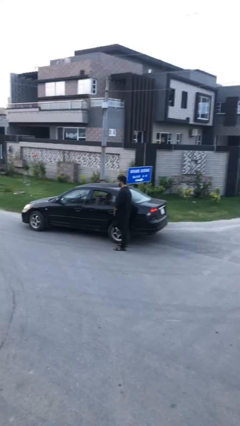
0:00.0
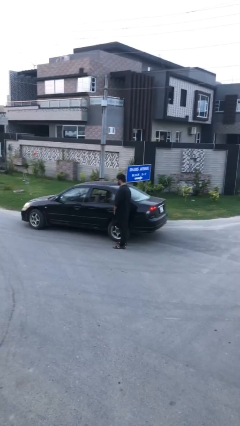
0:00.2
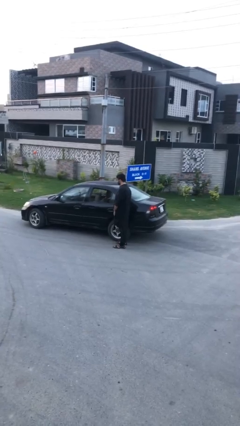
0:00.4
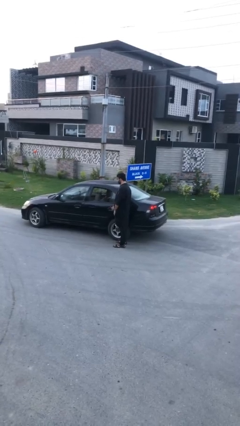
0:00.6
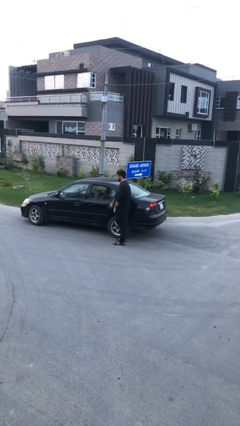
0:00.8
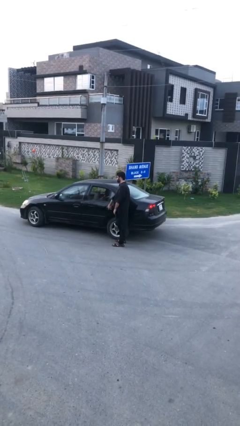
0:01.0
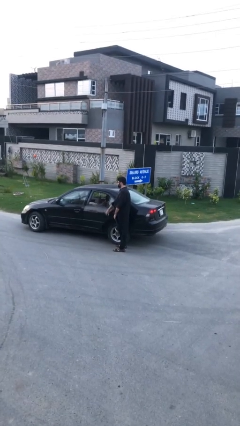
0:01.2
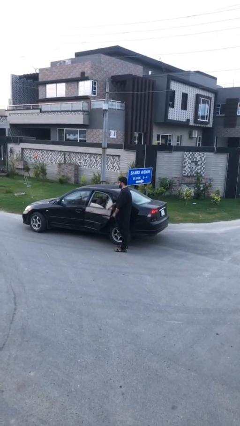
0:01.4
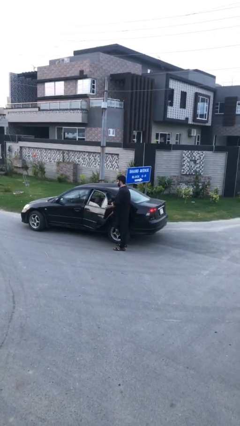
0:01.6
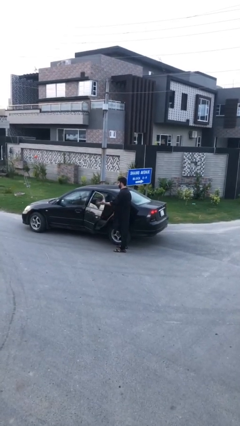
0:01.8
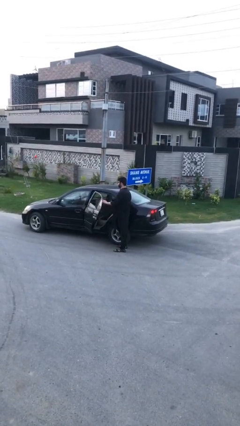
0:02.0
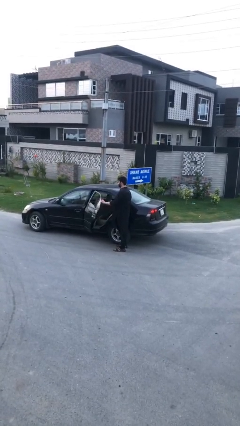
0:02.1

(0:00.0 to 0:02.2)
person opens car door

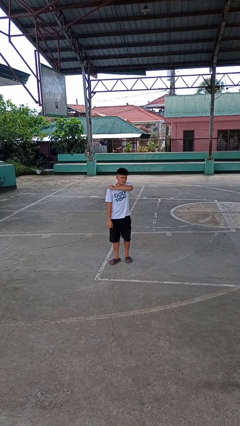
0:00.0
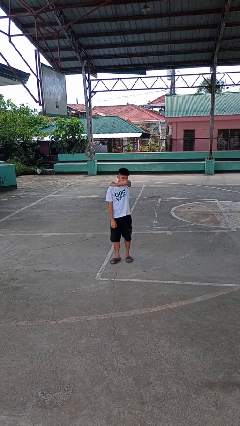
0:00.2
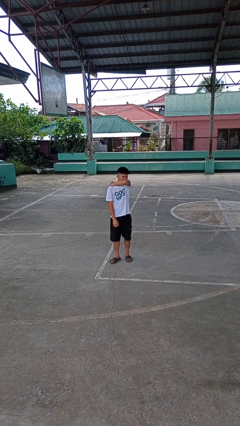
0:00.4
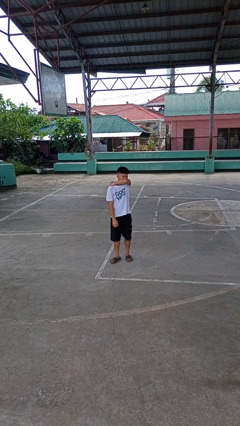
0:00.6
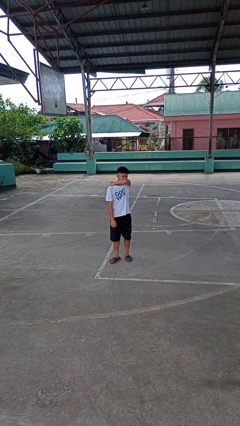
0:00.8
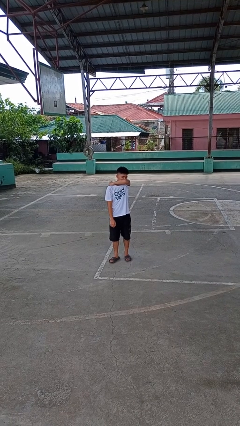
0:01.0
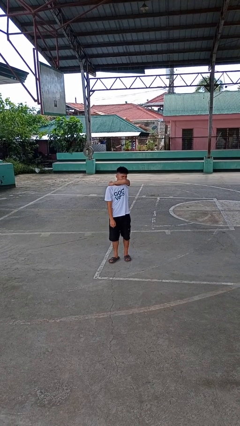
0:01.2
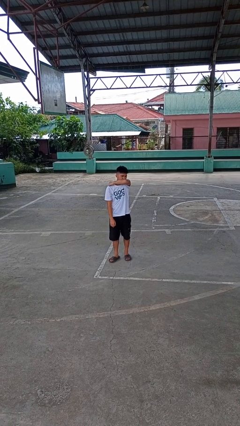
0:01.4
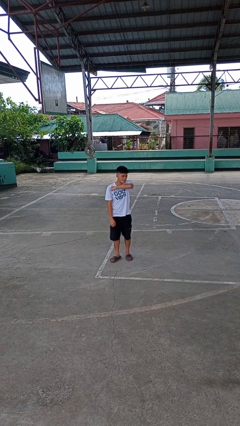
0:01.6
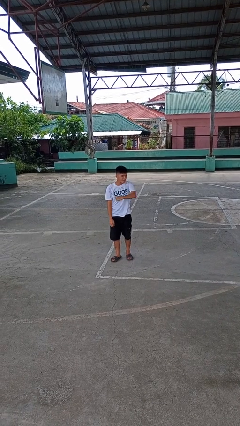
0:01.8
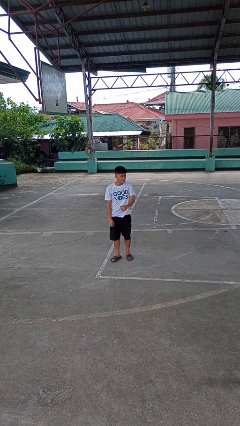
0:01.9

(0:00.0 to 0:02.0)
person sneezes into arm

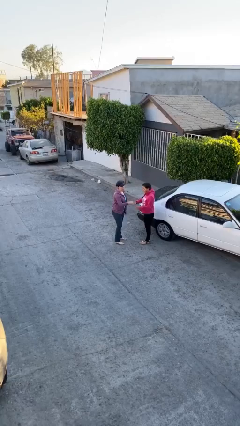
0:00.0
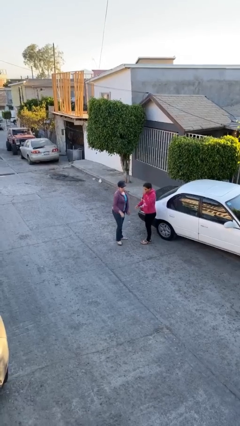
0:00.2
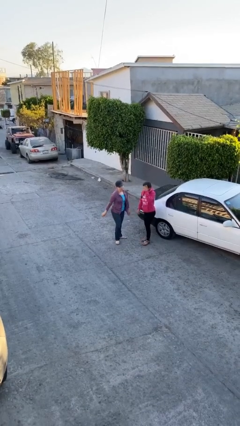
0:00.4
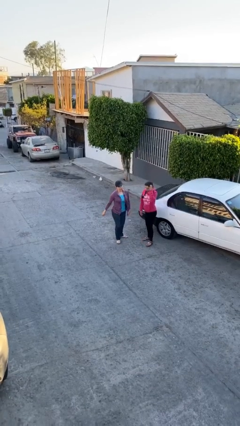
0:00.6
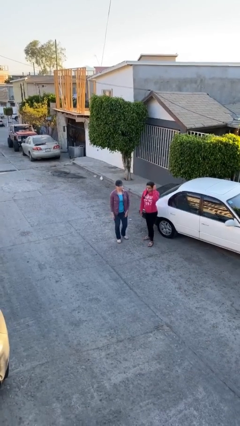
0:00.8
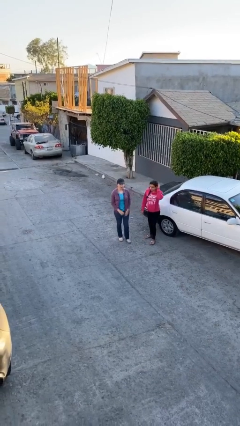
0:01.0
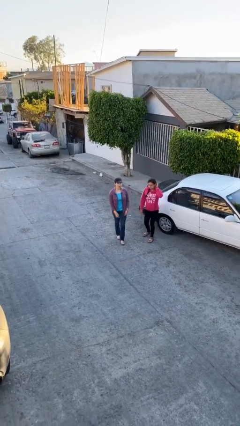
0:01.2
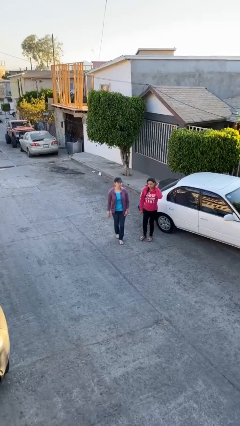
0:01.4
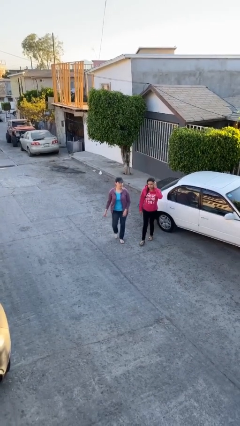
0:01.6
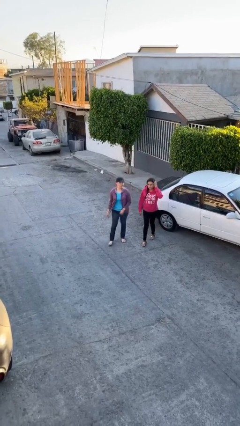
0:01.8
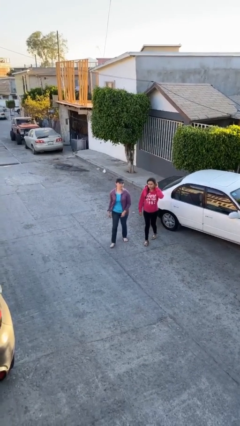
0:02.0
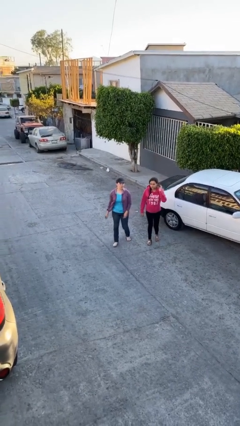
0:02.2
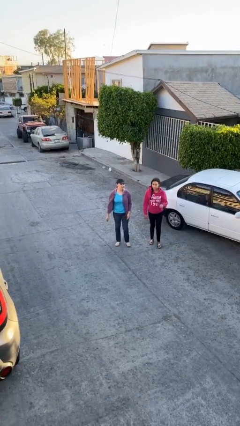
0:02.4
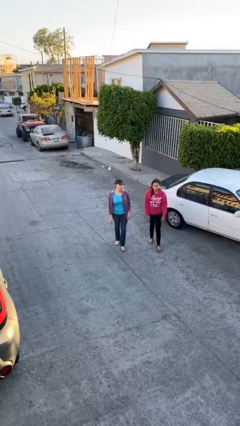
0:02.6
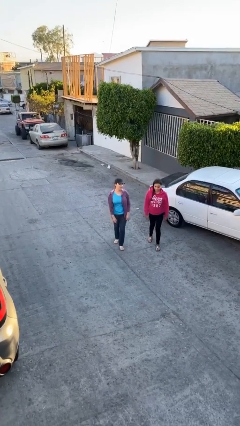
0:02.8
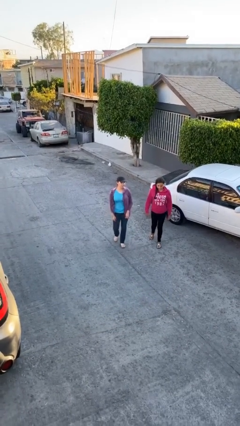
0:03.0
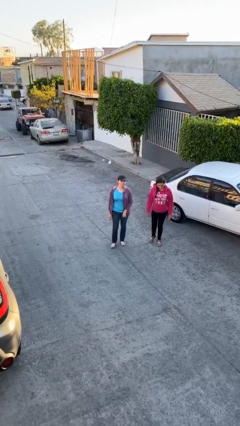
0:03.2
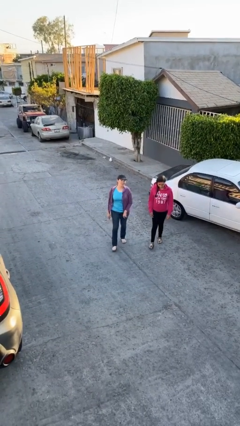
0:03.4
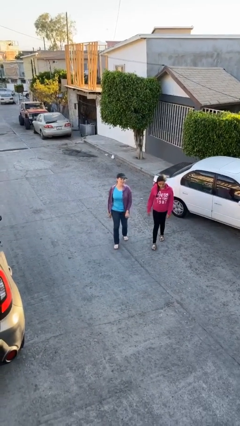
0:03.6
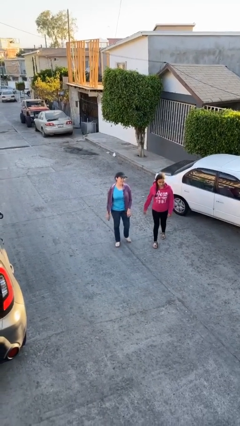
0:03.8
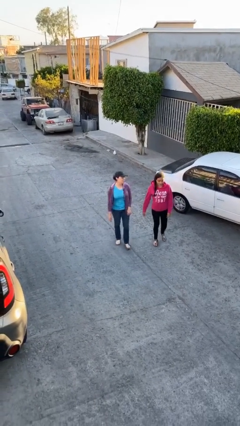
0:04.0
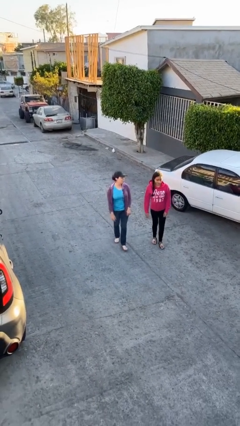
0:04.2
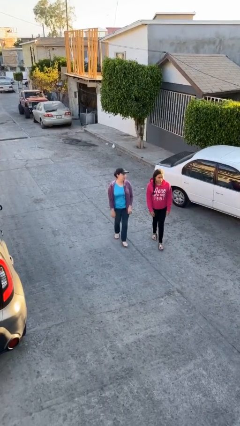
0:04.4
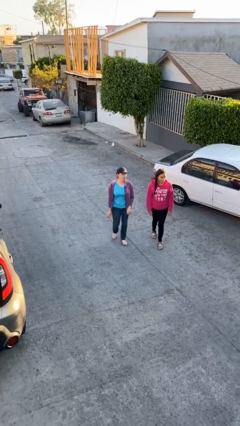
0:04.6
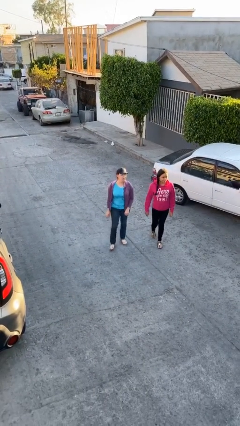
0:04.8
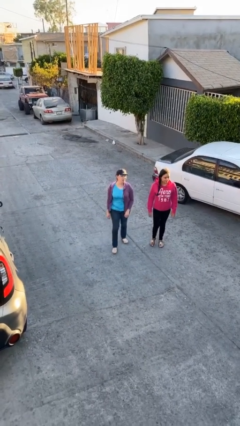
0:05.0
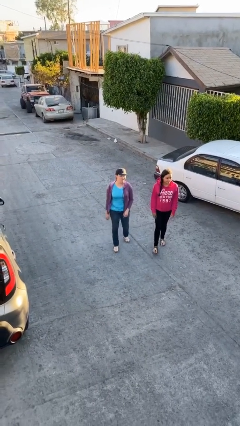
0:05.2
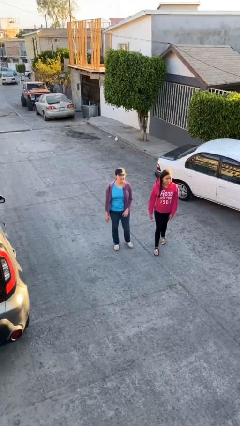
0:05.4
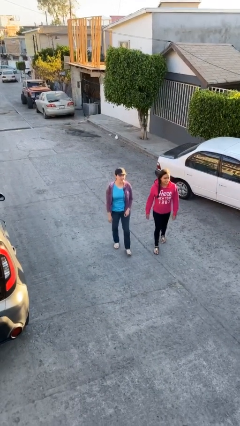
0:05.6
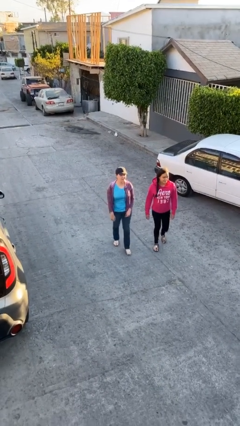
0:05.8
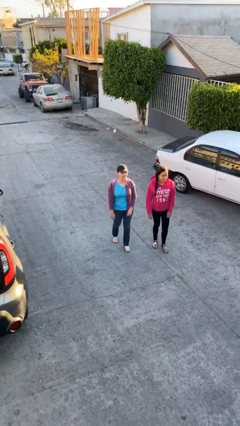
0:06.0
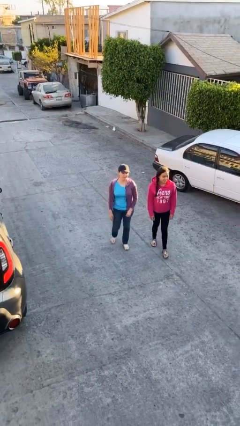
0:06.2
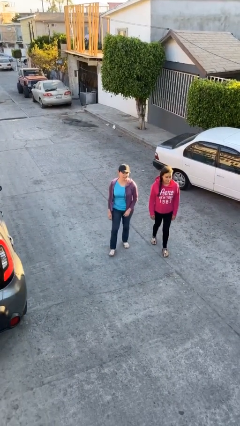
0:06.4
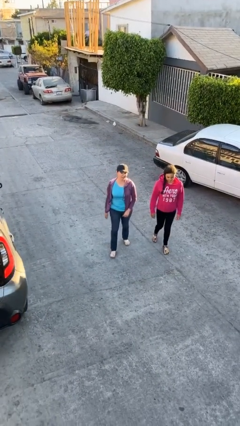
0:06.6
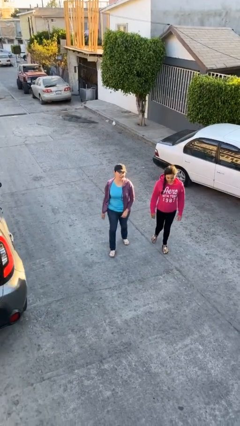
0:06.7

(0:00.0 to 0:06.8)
person talks to person

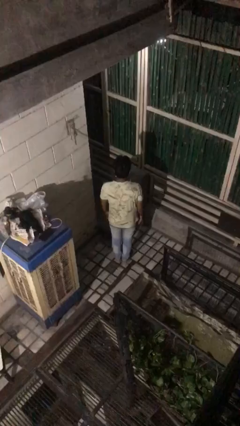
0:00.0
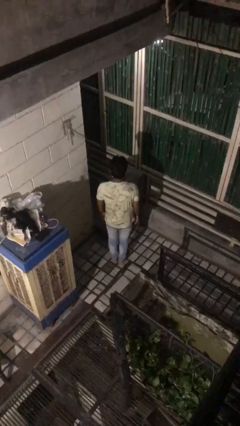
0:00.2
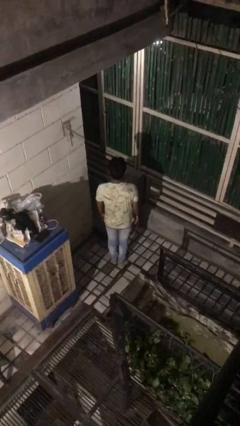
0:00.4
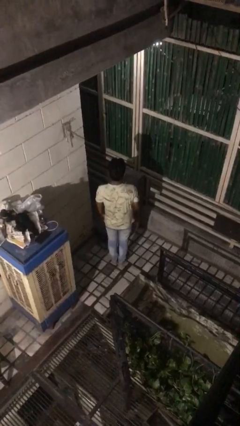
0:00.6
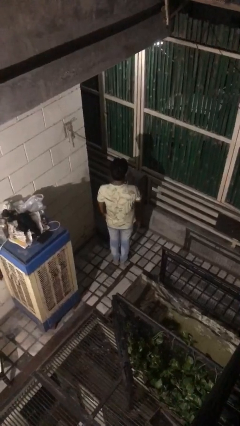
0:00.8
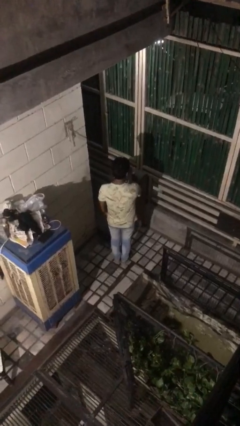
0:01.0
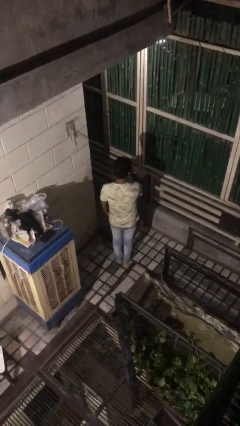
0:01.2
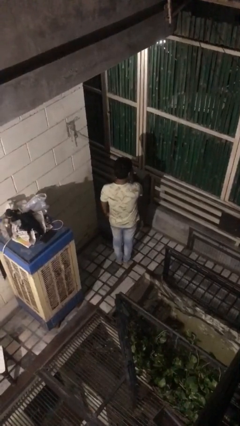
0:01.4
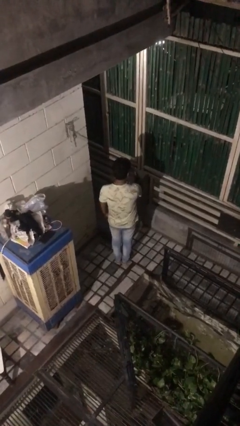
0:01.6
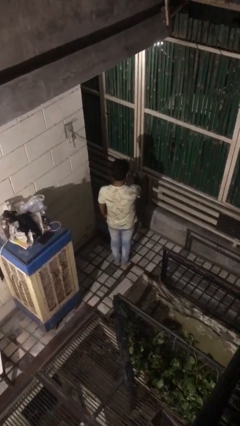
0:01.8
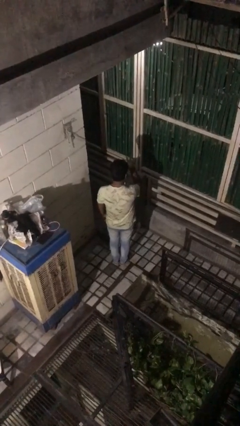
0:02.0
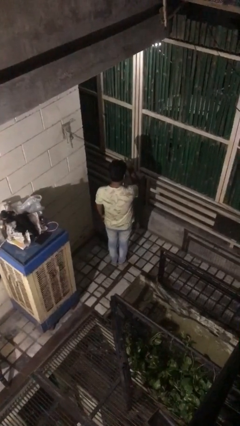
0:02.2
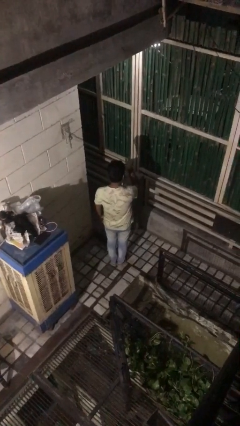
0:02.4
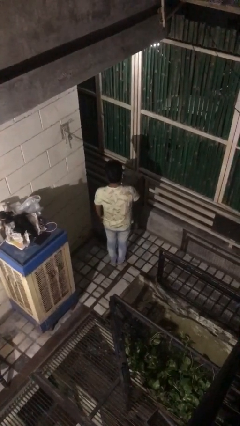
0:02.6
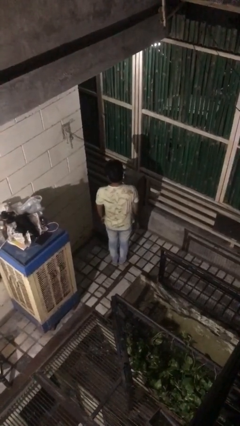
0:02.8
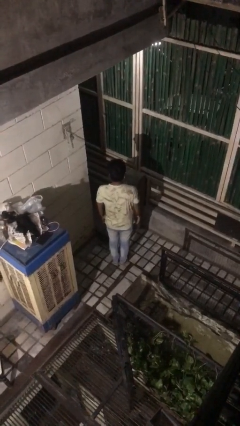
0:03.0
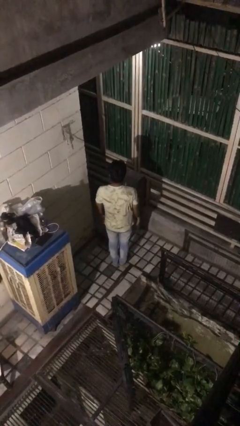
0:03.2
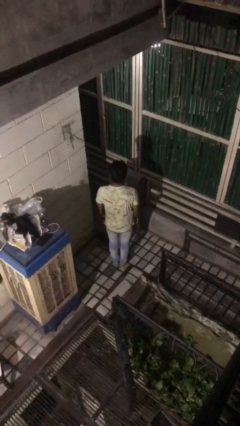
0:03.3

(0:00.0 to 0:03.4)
person gestures watch closely

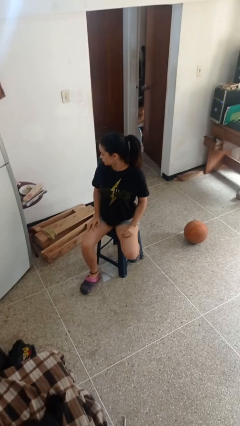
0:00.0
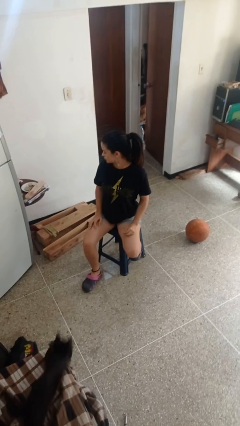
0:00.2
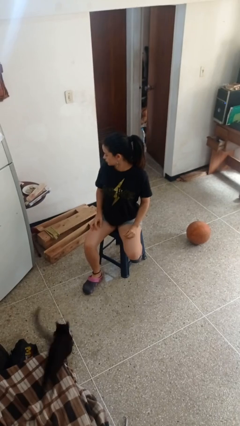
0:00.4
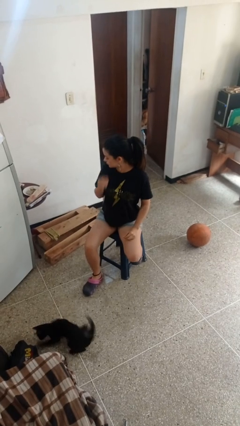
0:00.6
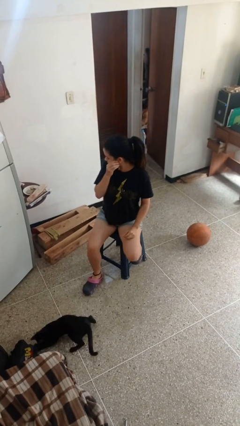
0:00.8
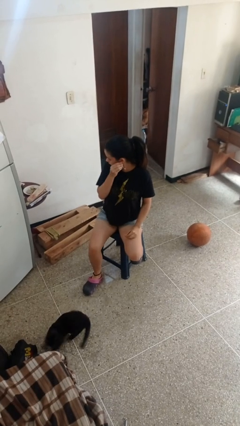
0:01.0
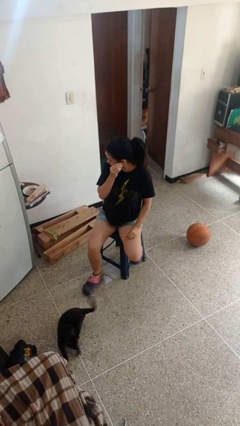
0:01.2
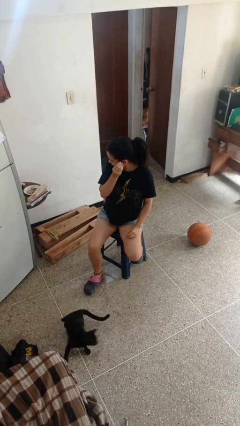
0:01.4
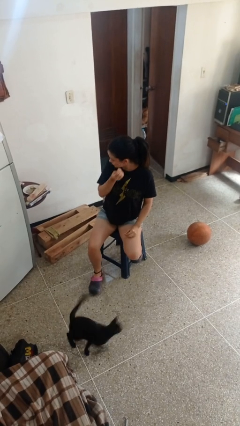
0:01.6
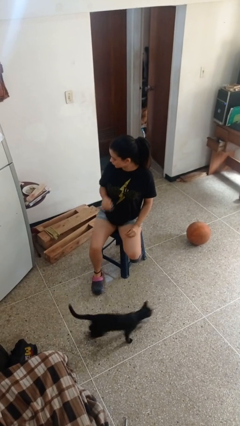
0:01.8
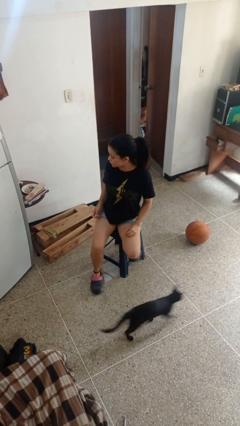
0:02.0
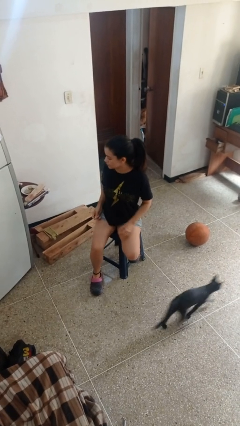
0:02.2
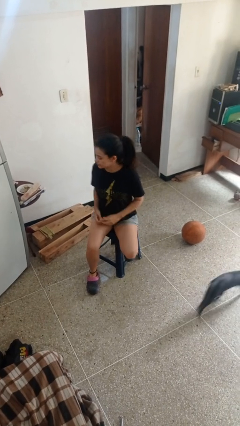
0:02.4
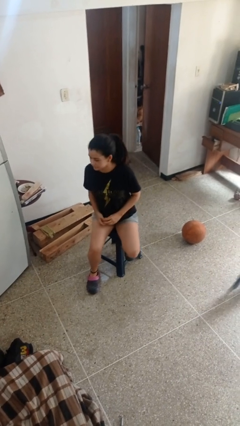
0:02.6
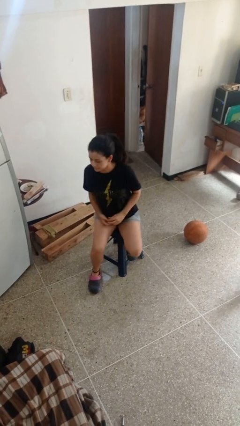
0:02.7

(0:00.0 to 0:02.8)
person takes off earrings

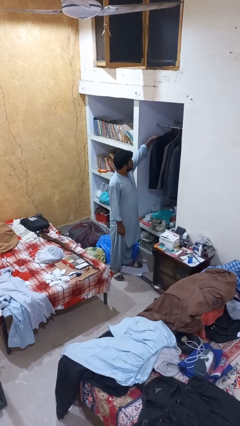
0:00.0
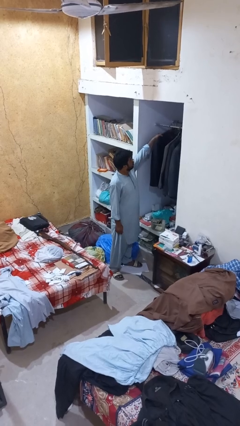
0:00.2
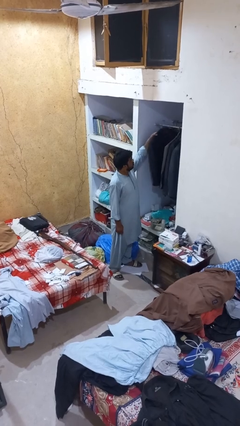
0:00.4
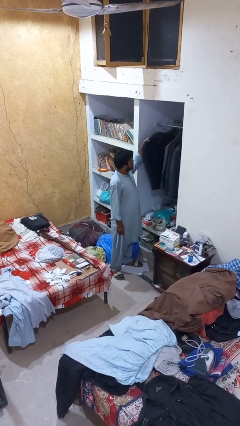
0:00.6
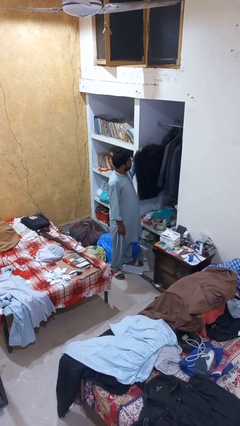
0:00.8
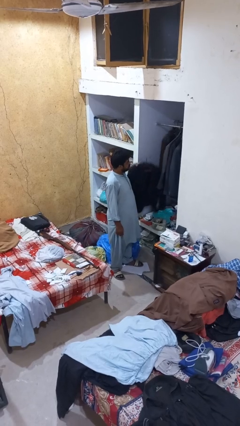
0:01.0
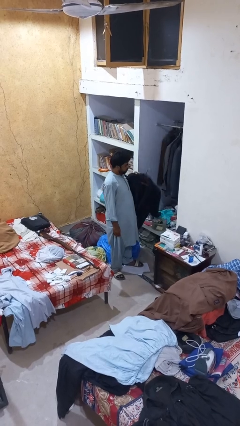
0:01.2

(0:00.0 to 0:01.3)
person takes clothes from closet
